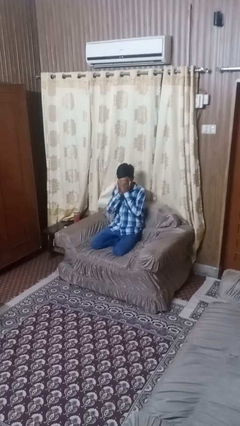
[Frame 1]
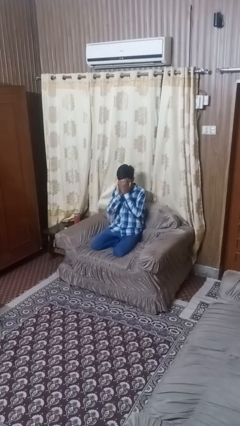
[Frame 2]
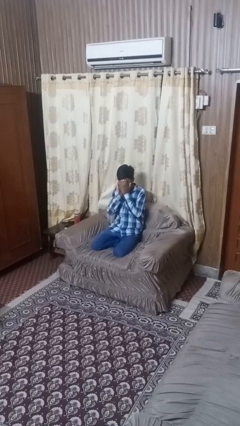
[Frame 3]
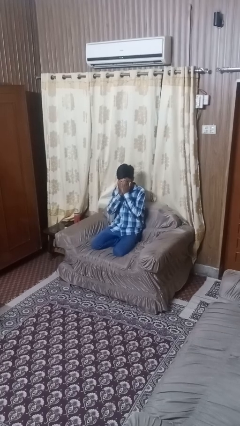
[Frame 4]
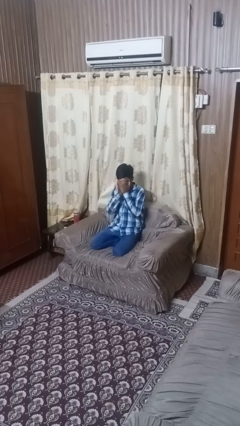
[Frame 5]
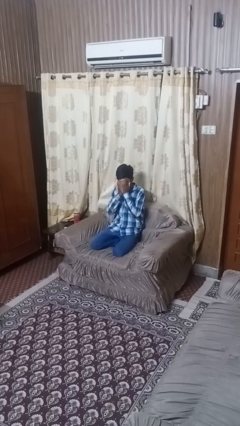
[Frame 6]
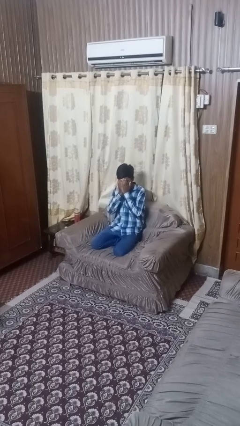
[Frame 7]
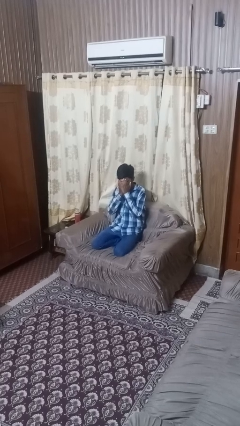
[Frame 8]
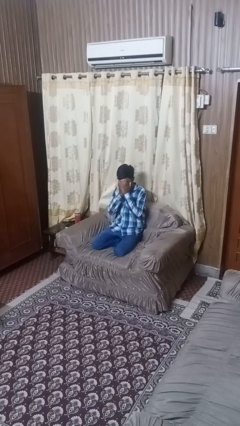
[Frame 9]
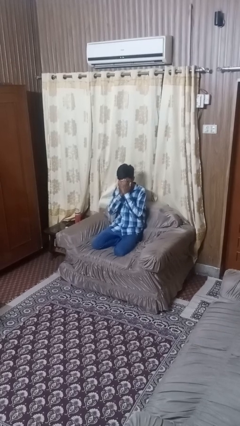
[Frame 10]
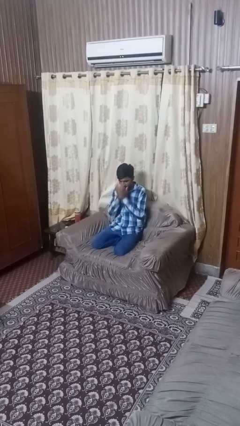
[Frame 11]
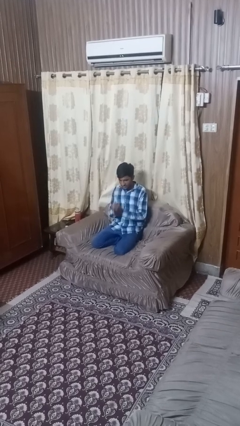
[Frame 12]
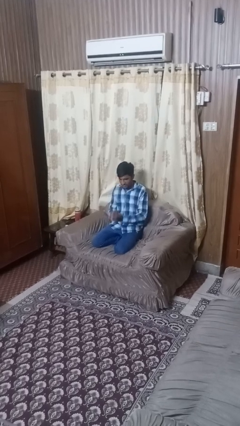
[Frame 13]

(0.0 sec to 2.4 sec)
person covers face with hands

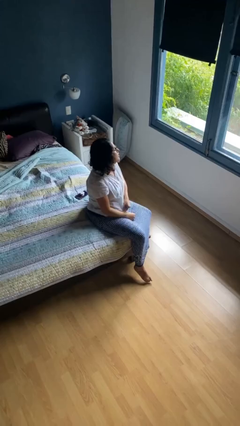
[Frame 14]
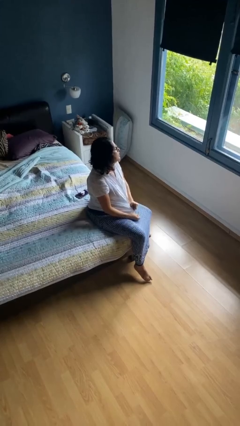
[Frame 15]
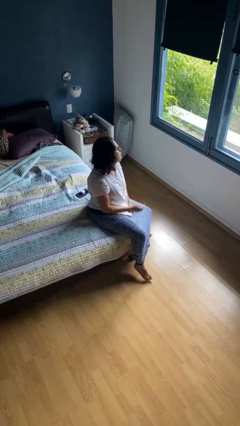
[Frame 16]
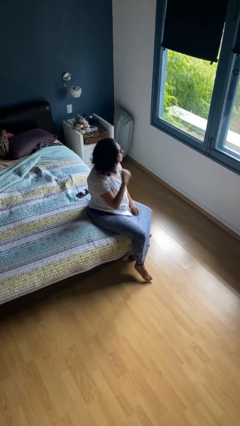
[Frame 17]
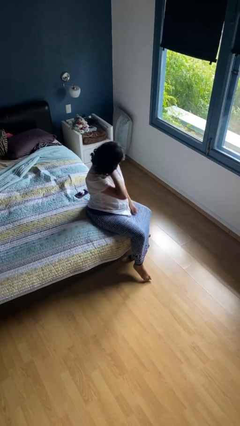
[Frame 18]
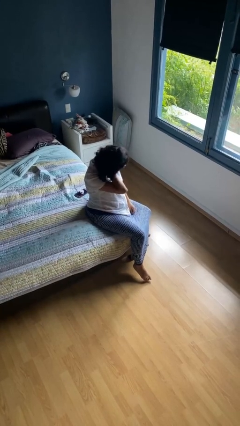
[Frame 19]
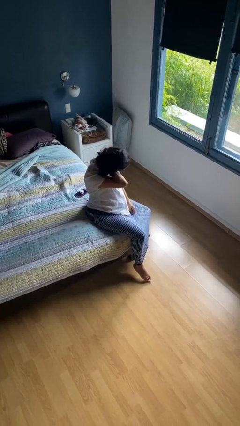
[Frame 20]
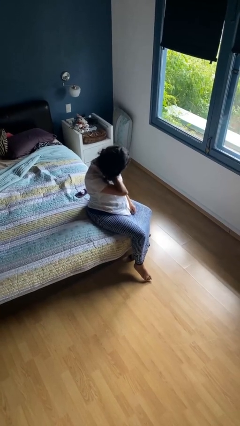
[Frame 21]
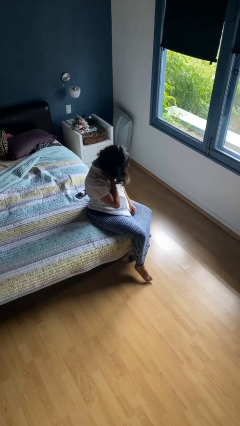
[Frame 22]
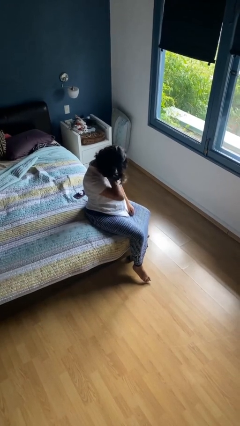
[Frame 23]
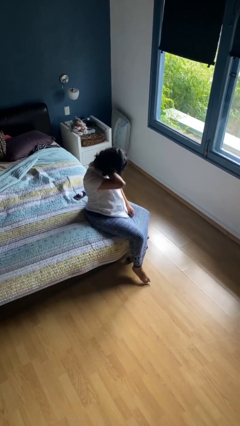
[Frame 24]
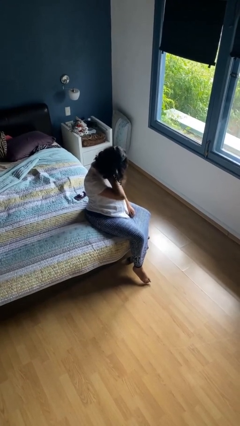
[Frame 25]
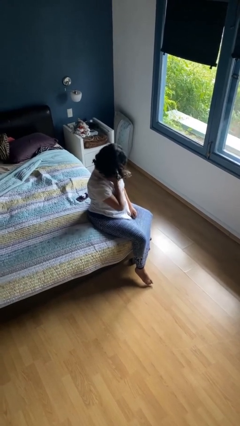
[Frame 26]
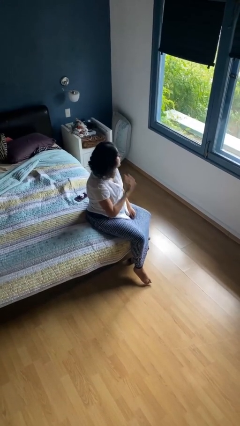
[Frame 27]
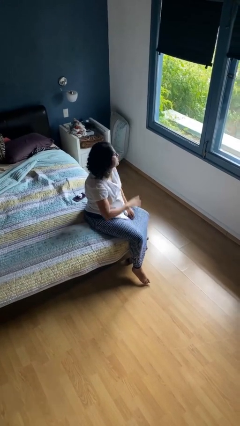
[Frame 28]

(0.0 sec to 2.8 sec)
person rubs neck

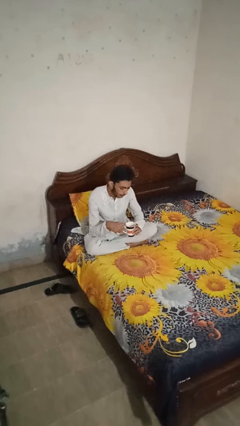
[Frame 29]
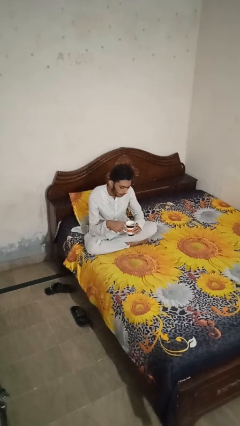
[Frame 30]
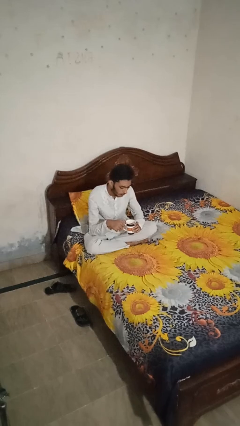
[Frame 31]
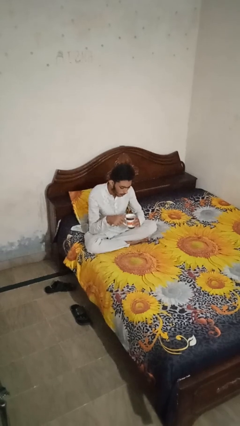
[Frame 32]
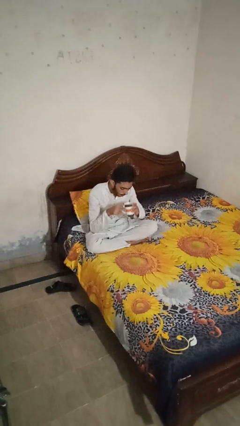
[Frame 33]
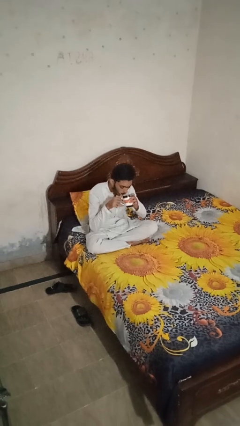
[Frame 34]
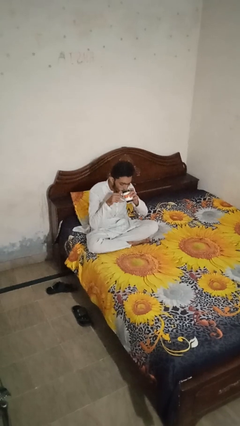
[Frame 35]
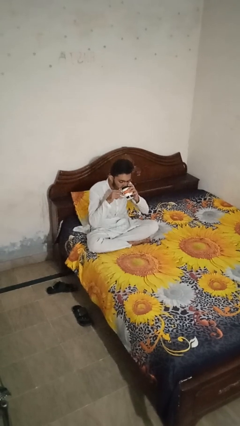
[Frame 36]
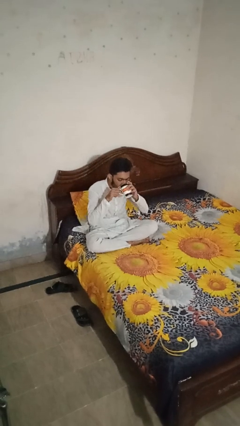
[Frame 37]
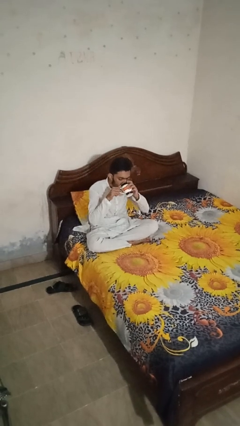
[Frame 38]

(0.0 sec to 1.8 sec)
person drinks from mug

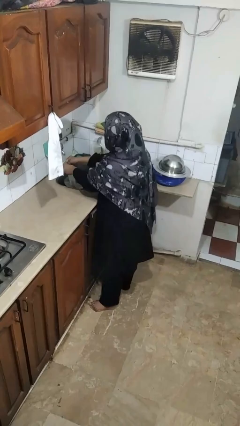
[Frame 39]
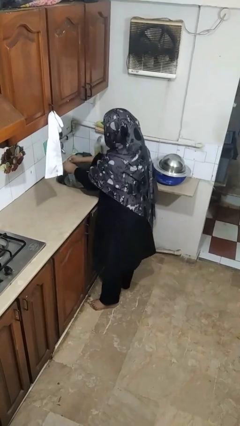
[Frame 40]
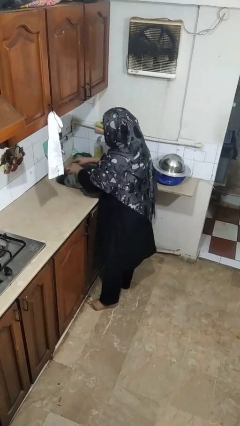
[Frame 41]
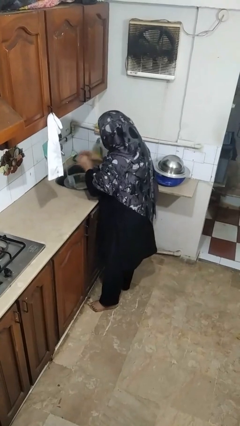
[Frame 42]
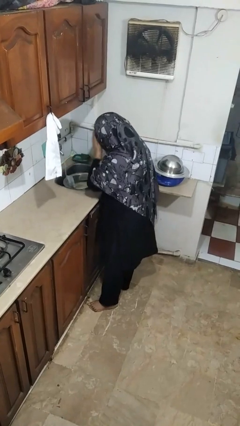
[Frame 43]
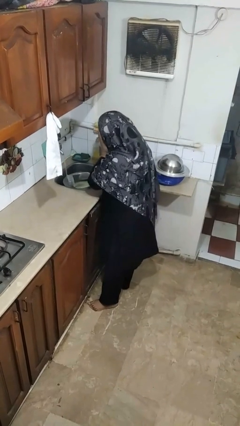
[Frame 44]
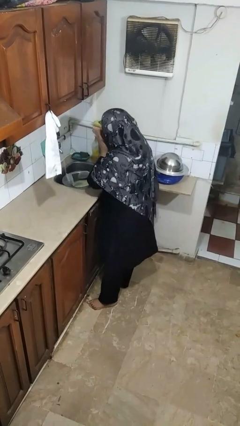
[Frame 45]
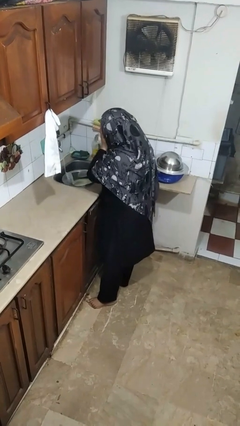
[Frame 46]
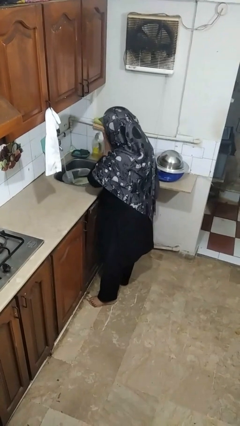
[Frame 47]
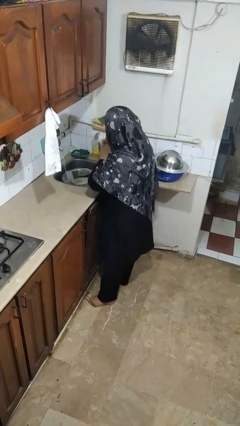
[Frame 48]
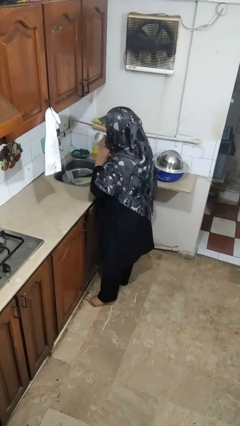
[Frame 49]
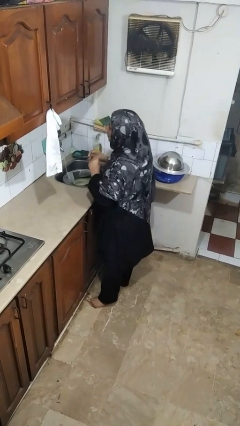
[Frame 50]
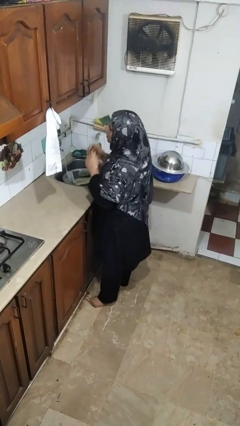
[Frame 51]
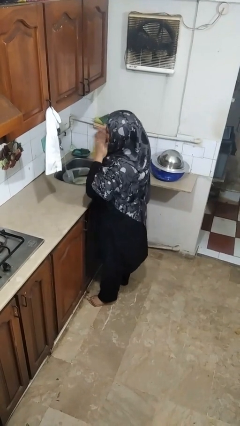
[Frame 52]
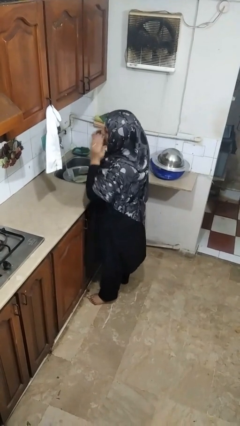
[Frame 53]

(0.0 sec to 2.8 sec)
person washes face

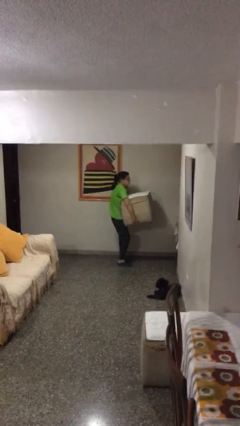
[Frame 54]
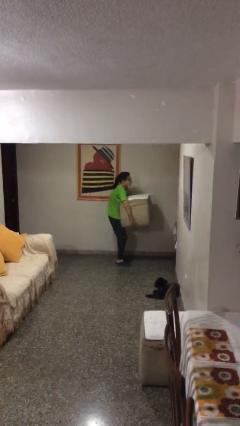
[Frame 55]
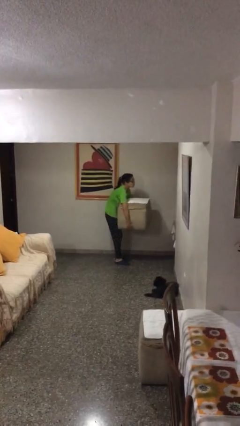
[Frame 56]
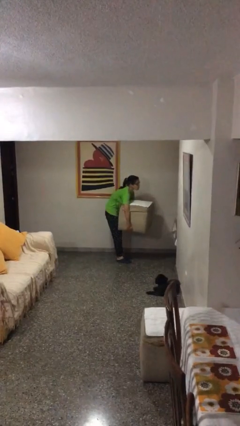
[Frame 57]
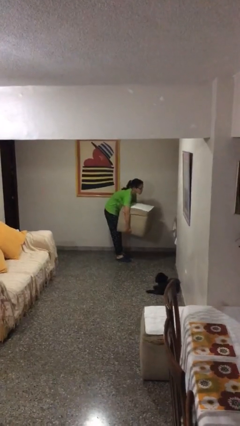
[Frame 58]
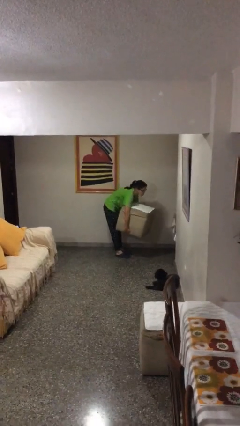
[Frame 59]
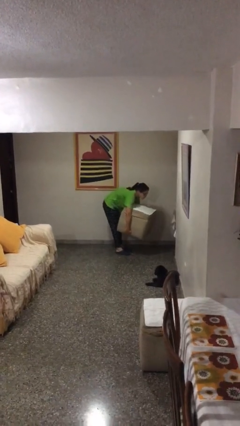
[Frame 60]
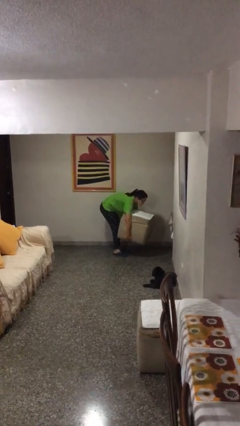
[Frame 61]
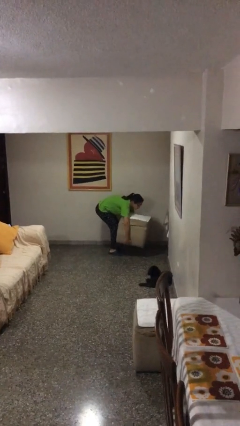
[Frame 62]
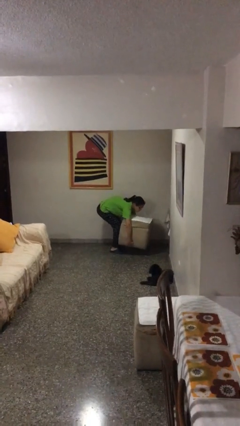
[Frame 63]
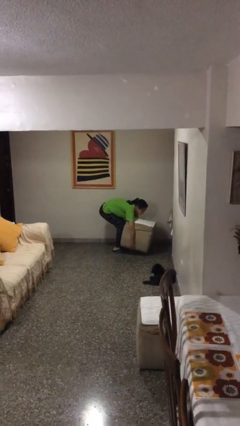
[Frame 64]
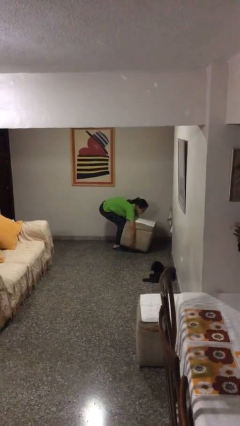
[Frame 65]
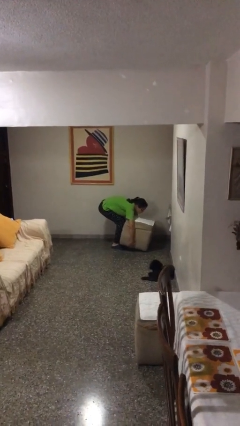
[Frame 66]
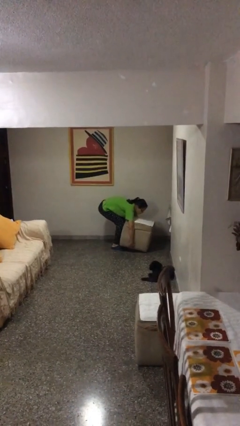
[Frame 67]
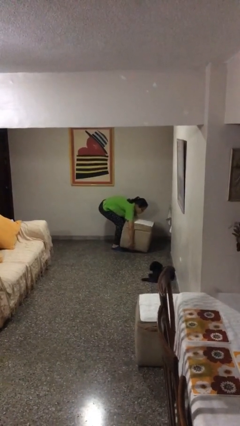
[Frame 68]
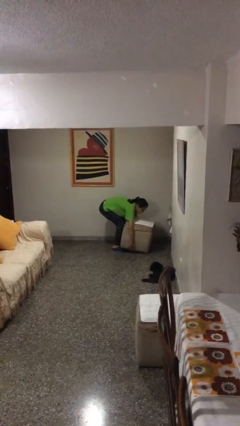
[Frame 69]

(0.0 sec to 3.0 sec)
person puts down object on floor

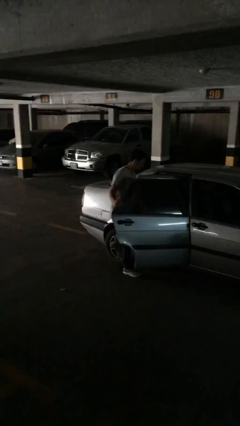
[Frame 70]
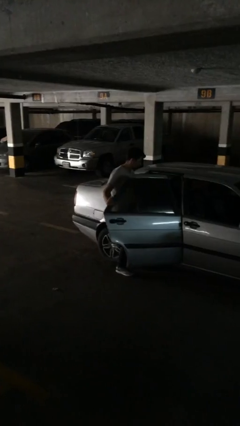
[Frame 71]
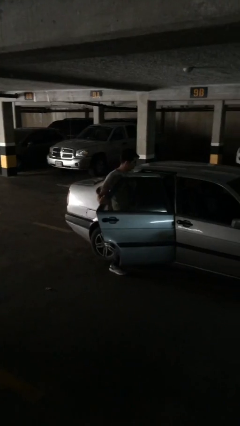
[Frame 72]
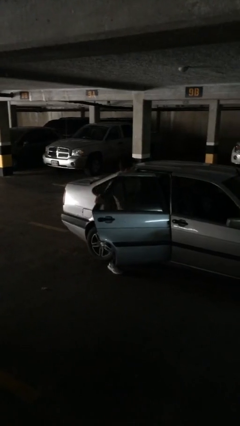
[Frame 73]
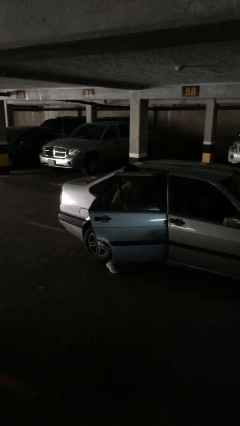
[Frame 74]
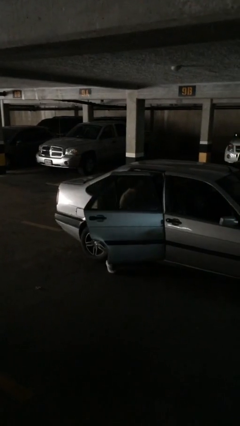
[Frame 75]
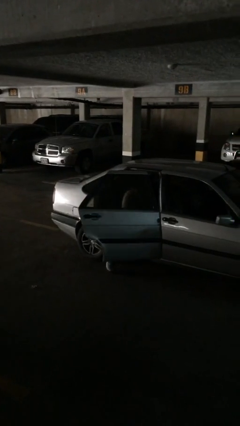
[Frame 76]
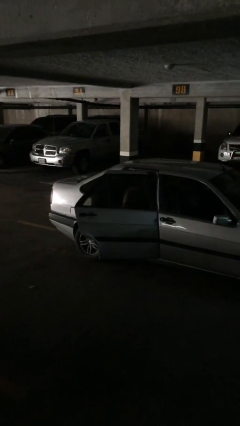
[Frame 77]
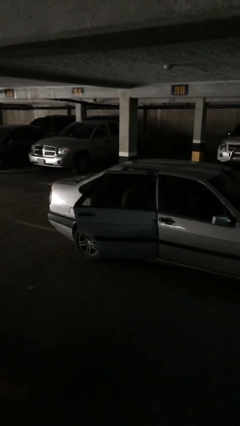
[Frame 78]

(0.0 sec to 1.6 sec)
person enters car

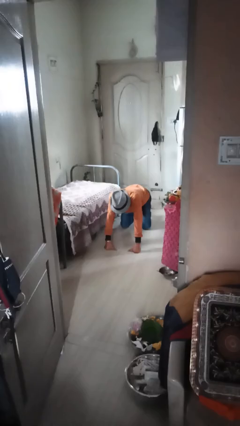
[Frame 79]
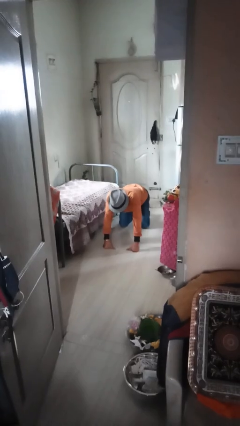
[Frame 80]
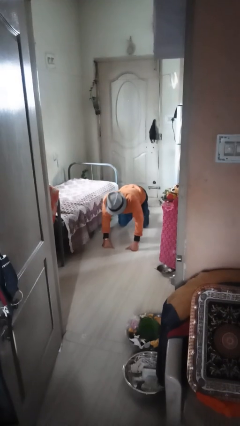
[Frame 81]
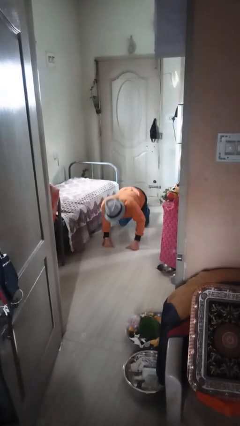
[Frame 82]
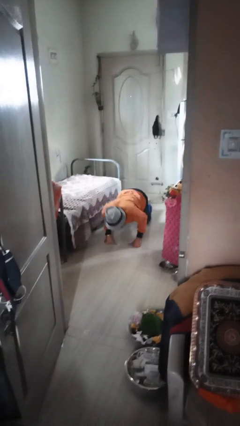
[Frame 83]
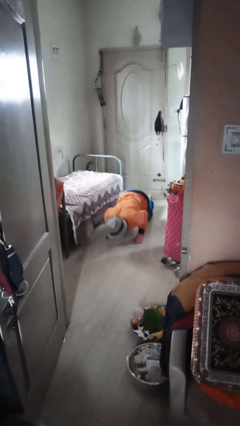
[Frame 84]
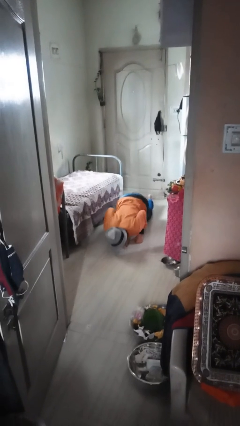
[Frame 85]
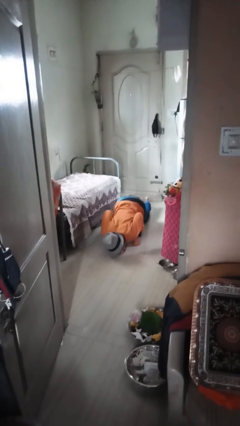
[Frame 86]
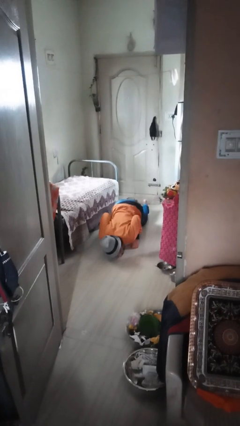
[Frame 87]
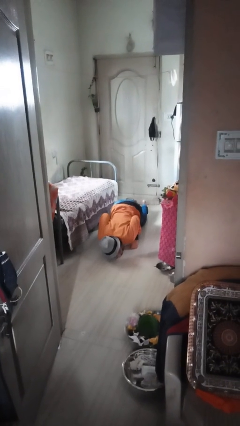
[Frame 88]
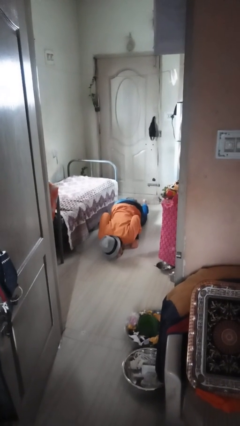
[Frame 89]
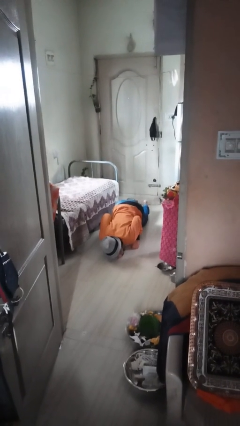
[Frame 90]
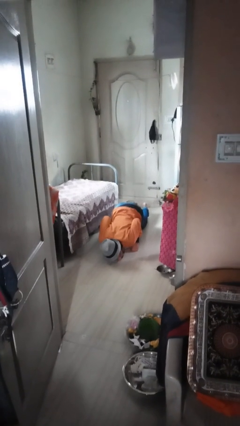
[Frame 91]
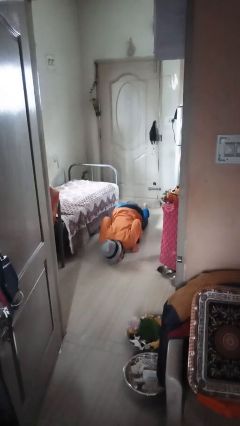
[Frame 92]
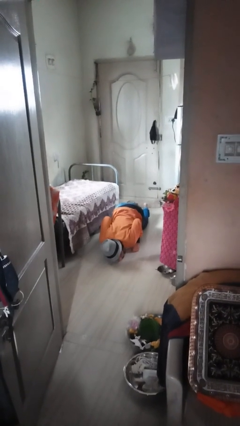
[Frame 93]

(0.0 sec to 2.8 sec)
person exercises with pushup
